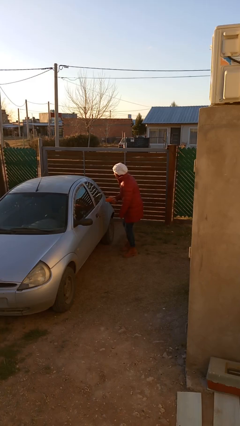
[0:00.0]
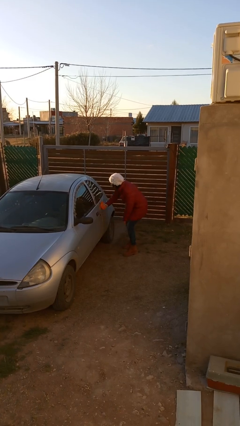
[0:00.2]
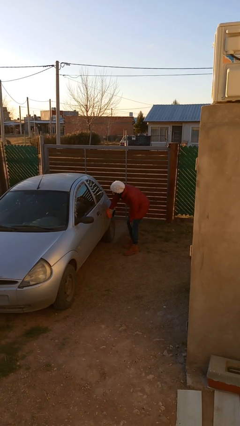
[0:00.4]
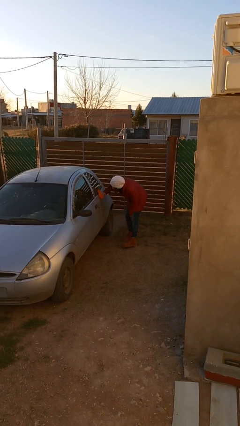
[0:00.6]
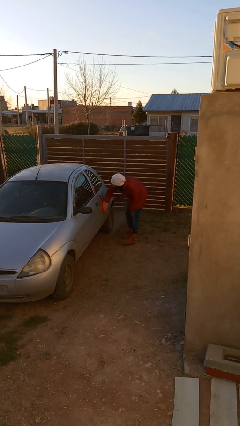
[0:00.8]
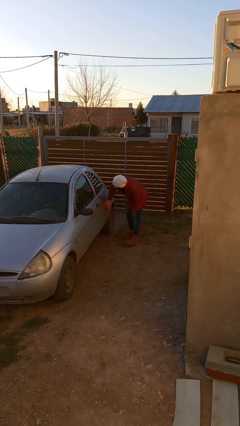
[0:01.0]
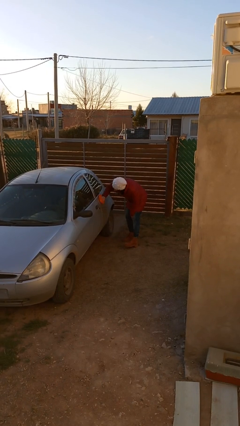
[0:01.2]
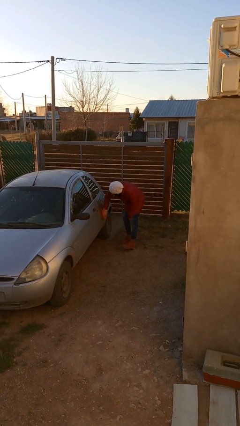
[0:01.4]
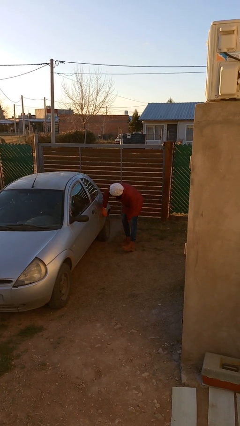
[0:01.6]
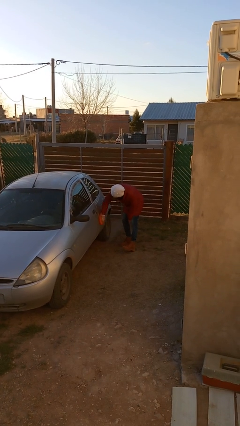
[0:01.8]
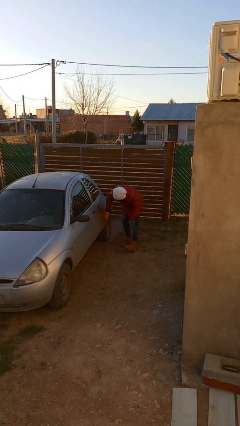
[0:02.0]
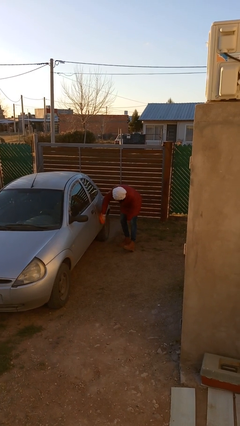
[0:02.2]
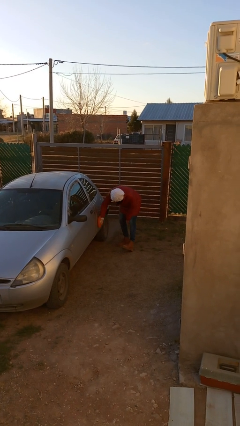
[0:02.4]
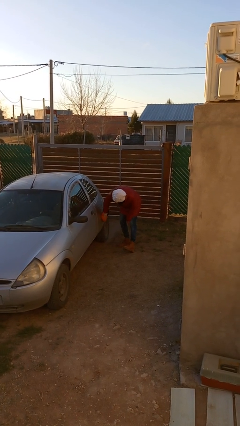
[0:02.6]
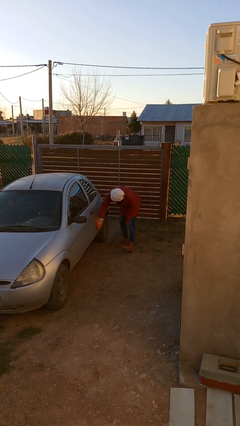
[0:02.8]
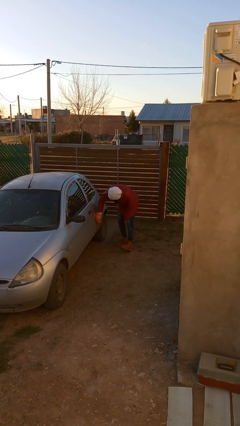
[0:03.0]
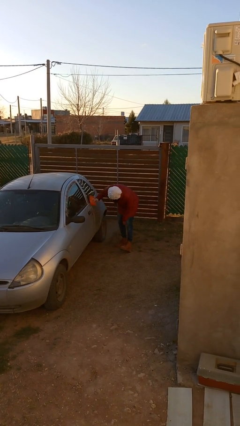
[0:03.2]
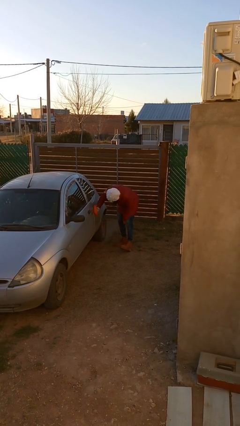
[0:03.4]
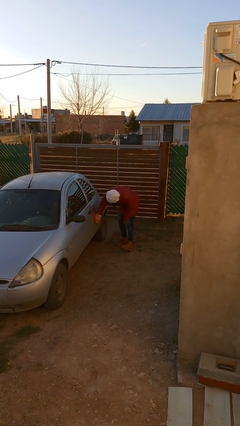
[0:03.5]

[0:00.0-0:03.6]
person polishes car with rag

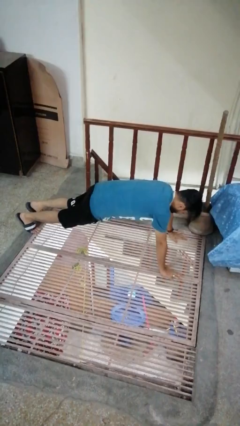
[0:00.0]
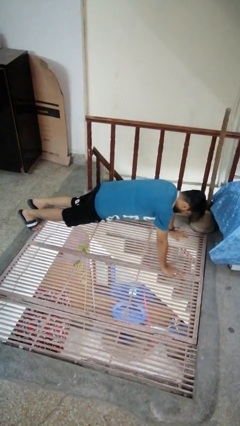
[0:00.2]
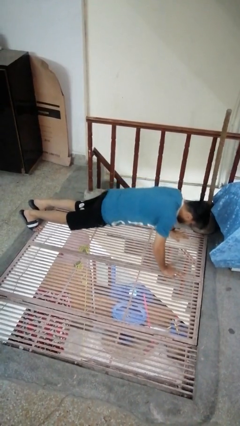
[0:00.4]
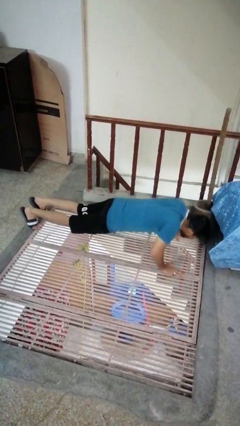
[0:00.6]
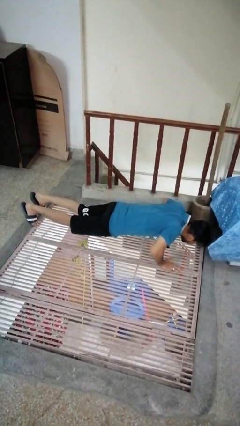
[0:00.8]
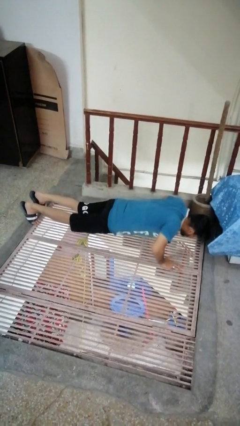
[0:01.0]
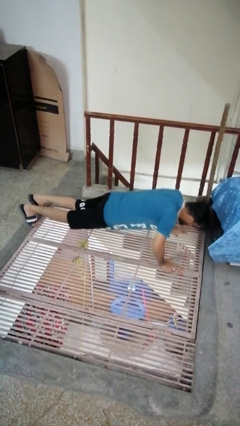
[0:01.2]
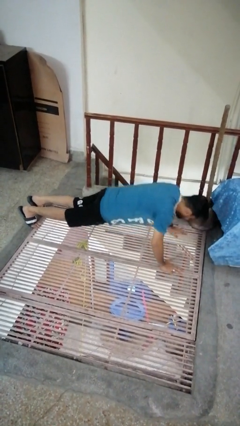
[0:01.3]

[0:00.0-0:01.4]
person exercises with pushup

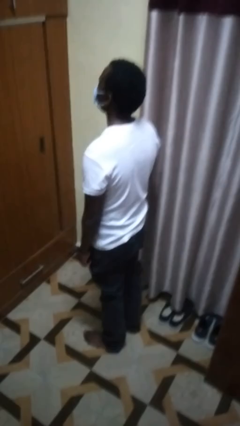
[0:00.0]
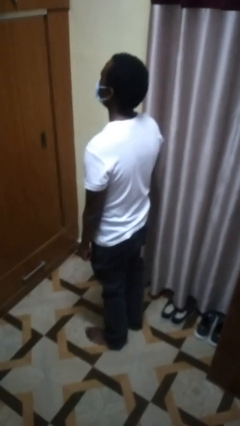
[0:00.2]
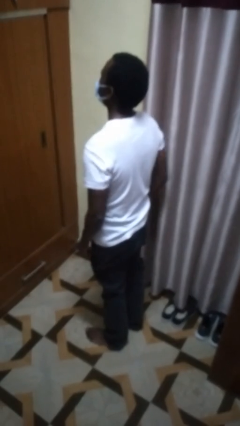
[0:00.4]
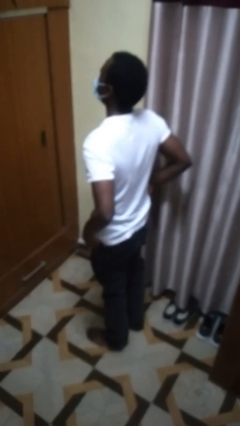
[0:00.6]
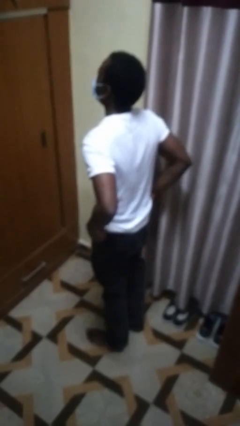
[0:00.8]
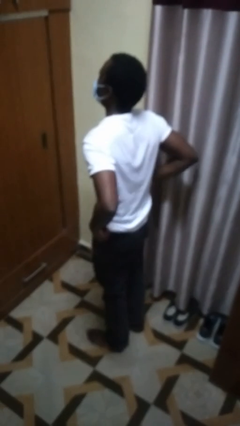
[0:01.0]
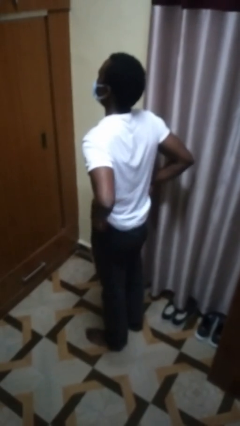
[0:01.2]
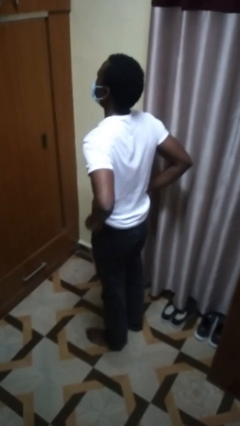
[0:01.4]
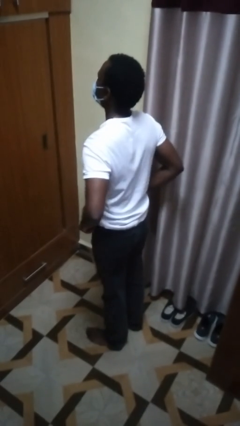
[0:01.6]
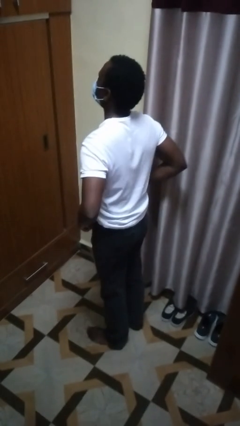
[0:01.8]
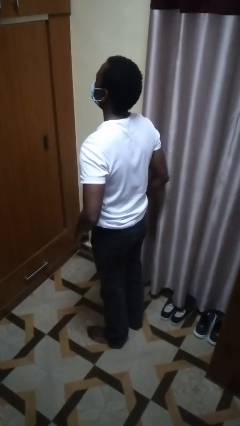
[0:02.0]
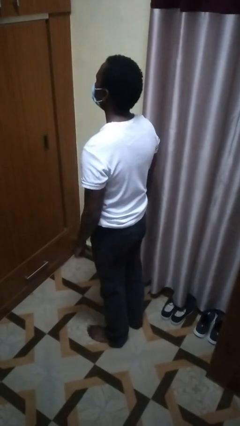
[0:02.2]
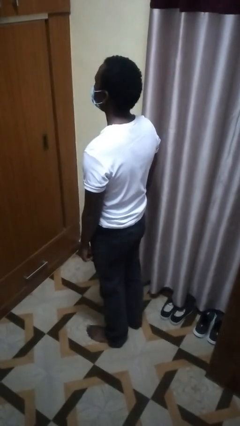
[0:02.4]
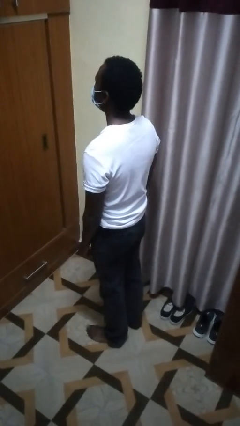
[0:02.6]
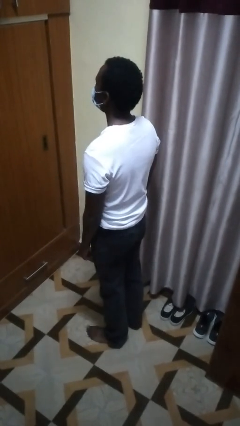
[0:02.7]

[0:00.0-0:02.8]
person hikes up pants

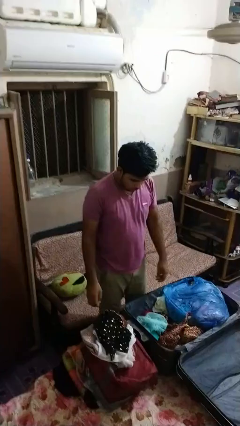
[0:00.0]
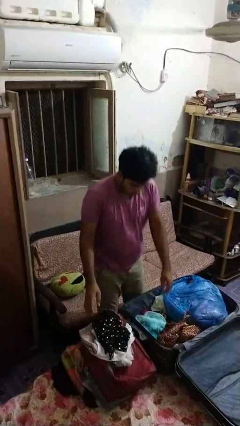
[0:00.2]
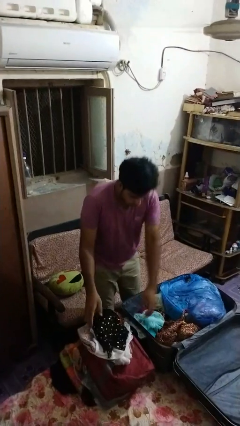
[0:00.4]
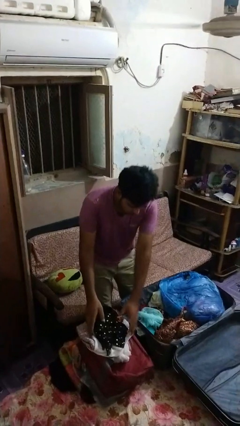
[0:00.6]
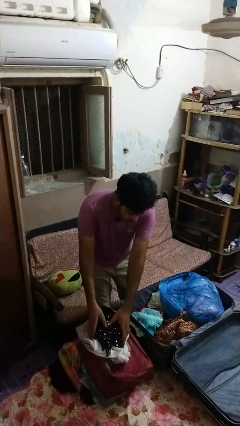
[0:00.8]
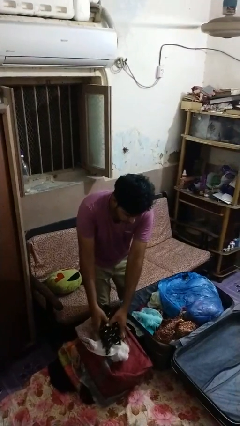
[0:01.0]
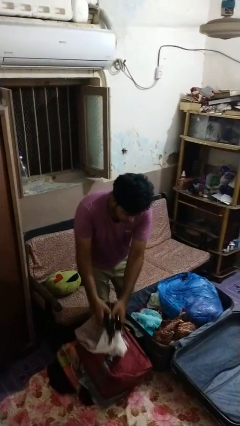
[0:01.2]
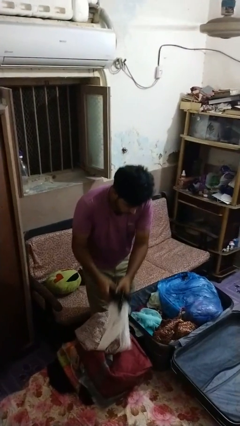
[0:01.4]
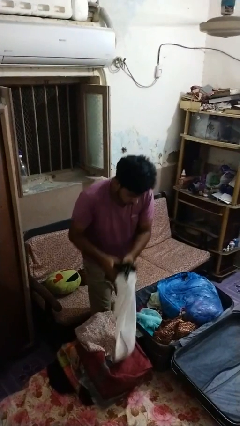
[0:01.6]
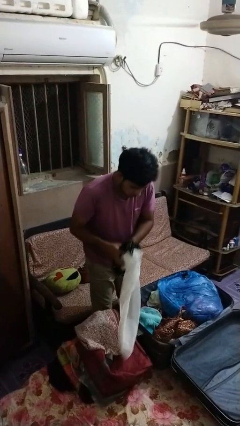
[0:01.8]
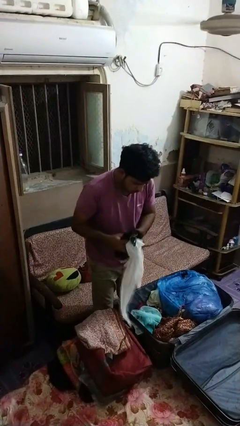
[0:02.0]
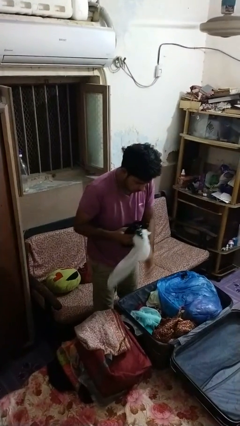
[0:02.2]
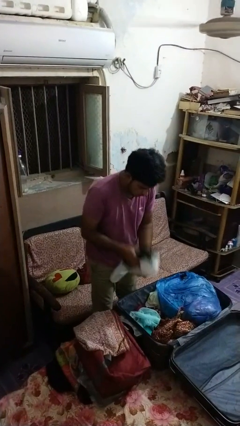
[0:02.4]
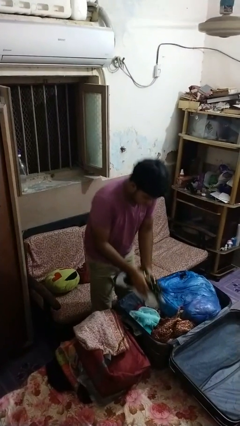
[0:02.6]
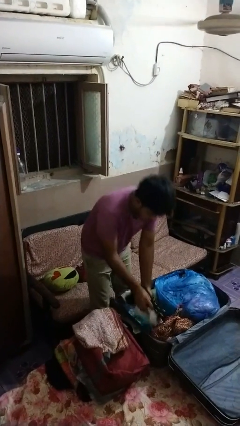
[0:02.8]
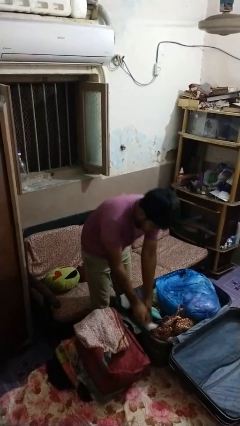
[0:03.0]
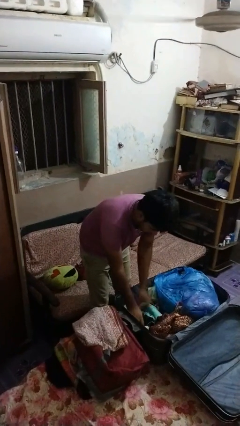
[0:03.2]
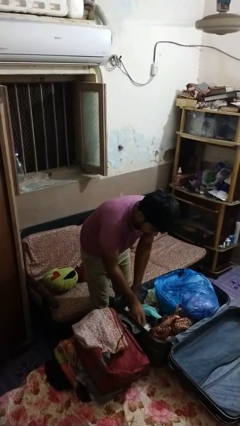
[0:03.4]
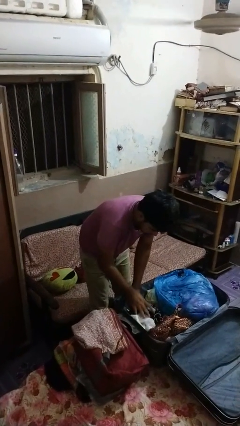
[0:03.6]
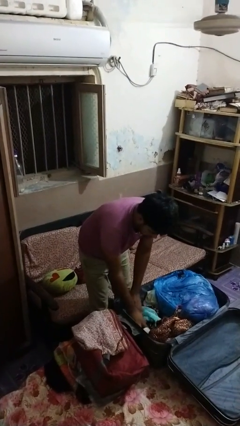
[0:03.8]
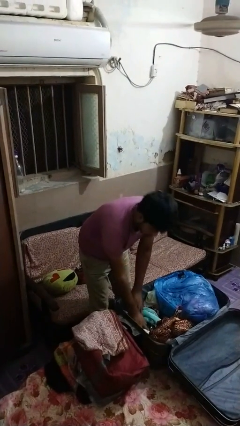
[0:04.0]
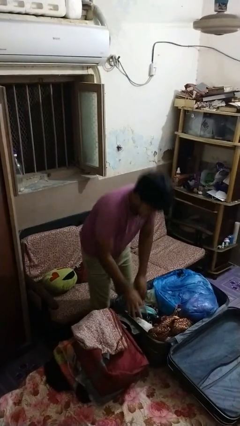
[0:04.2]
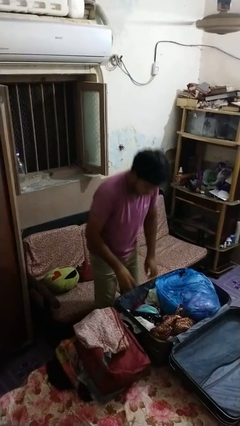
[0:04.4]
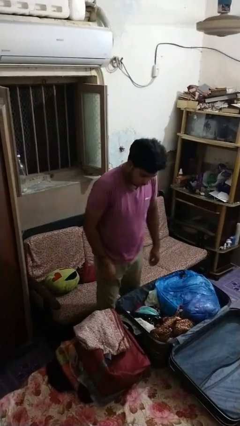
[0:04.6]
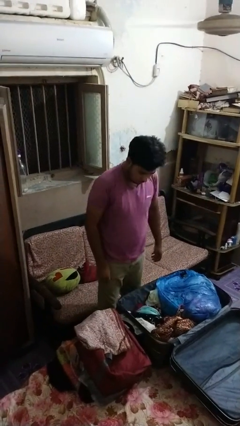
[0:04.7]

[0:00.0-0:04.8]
person loads clothes into suitcase

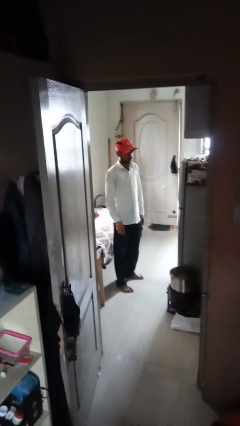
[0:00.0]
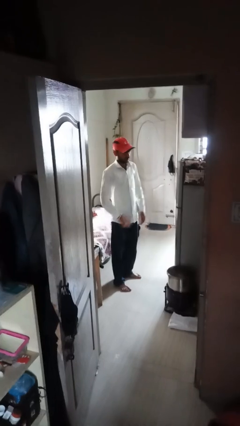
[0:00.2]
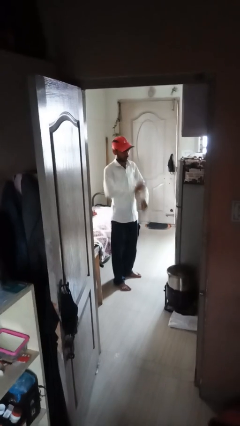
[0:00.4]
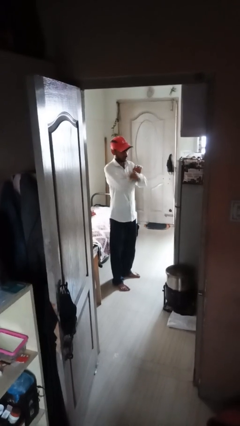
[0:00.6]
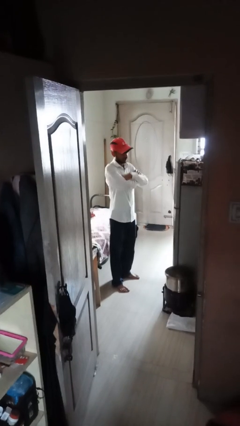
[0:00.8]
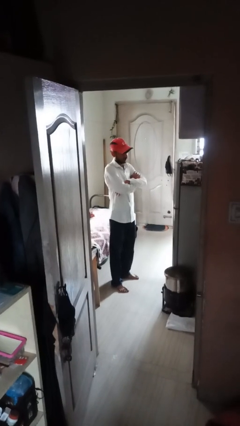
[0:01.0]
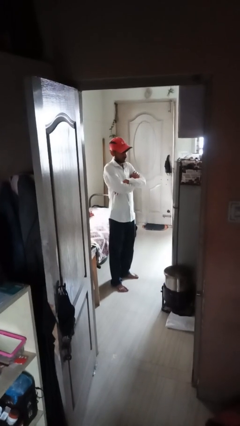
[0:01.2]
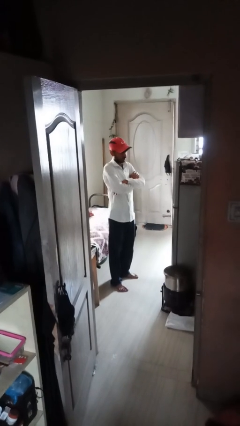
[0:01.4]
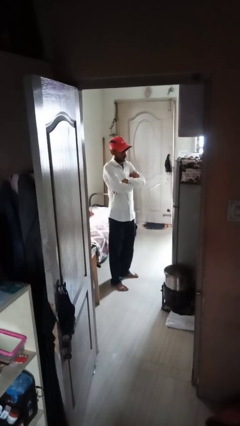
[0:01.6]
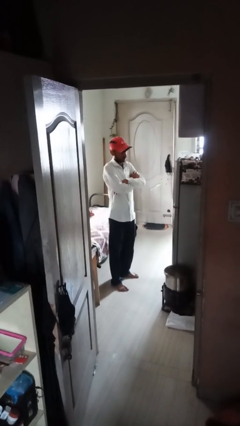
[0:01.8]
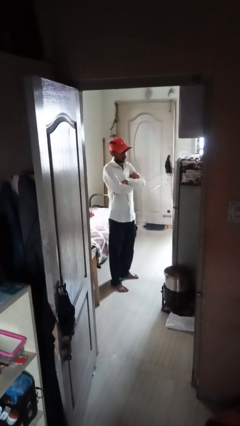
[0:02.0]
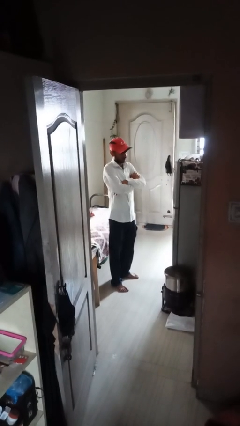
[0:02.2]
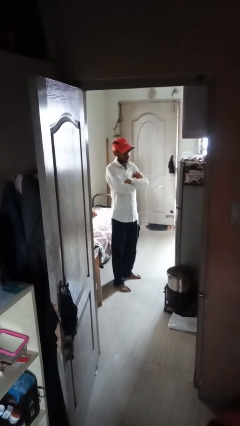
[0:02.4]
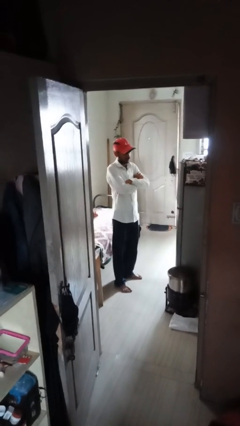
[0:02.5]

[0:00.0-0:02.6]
person crosses arms

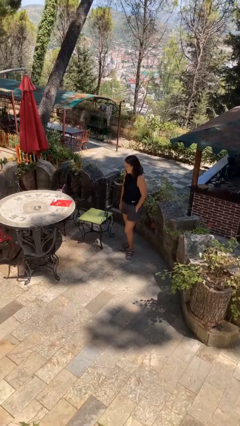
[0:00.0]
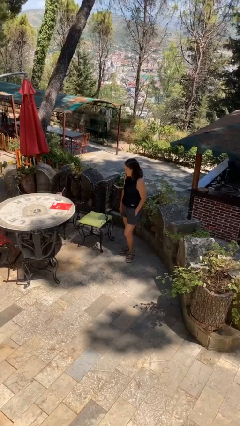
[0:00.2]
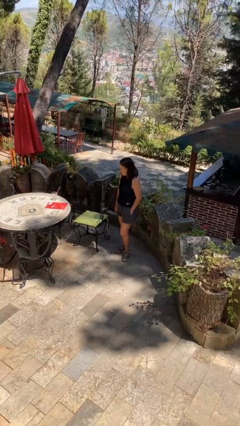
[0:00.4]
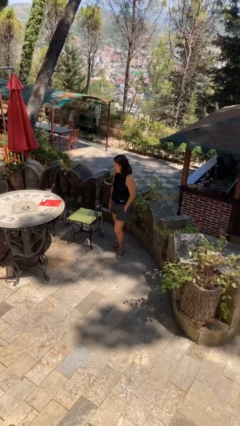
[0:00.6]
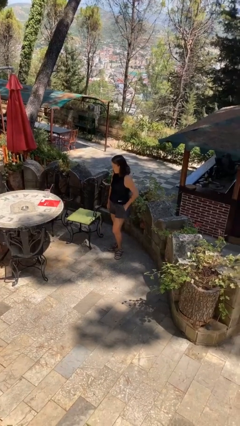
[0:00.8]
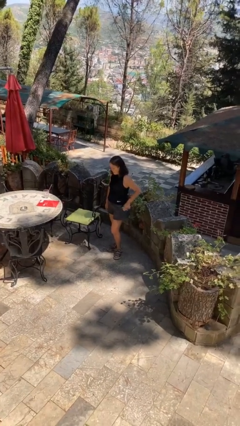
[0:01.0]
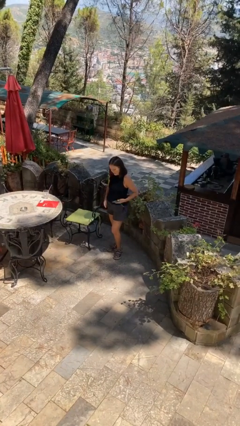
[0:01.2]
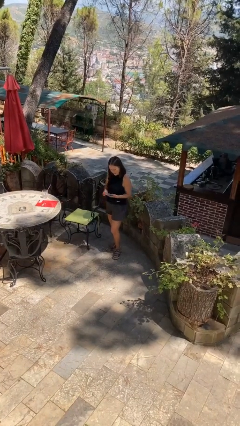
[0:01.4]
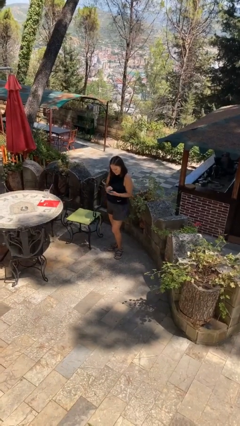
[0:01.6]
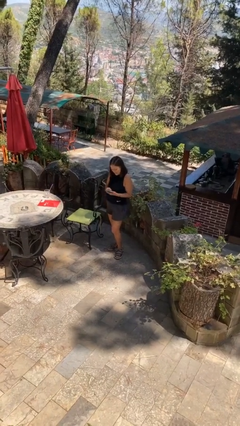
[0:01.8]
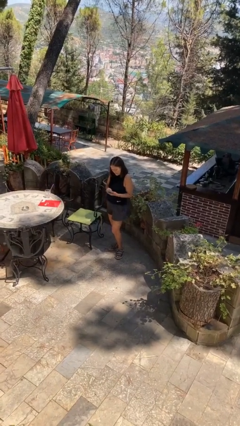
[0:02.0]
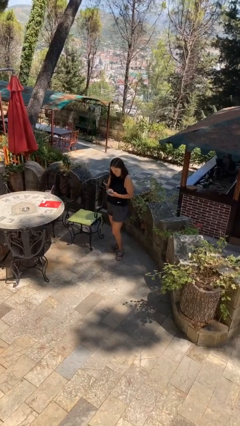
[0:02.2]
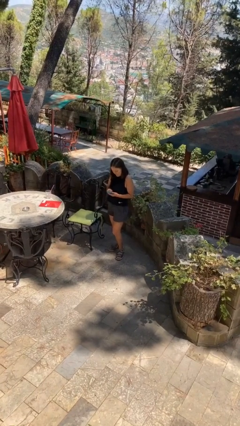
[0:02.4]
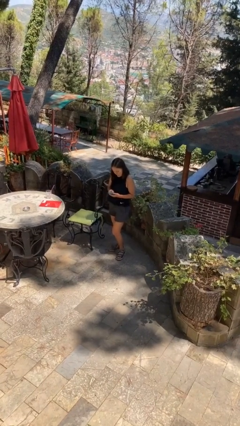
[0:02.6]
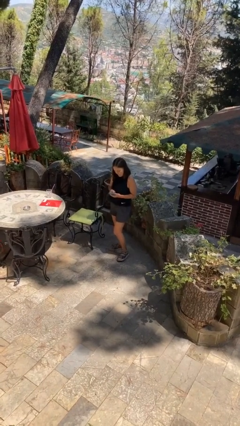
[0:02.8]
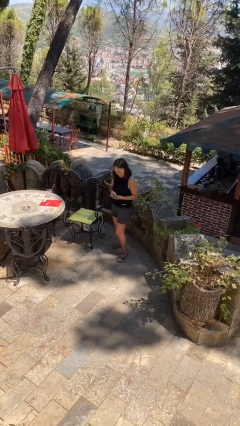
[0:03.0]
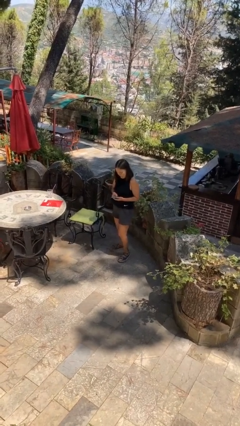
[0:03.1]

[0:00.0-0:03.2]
person takes phone from pocket
